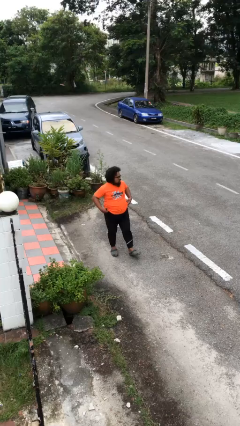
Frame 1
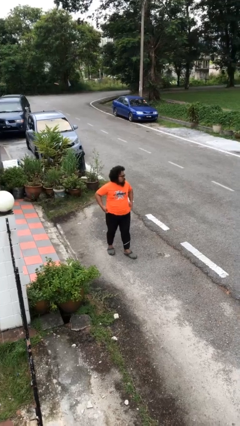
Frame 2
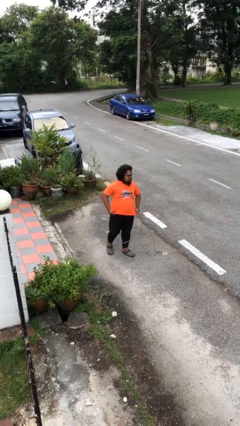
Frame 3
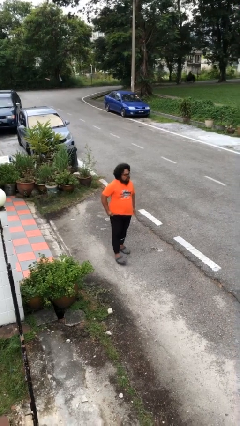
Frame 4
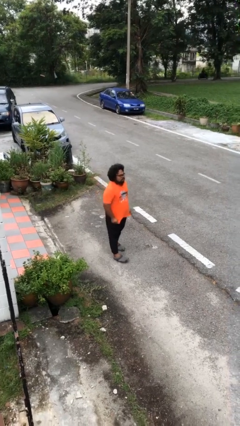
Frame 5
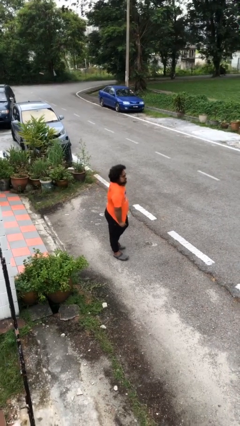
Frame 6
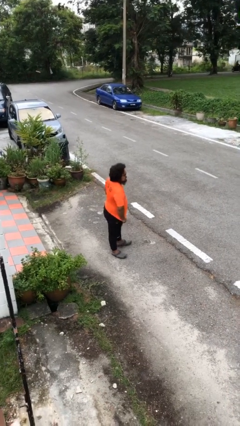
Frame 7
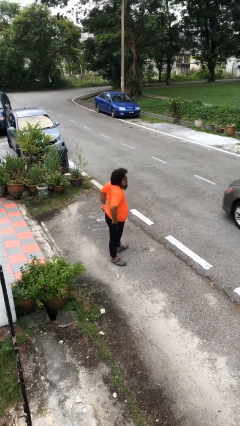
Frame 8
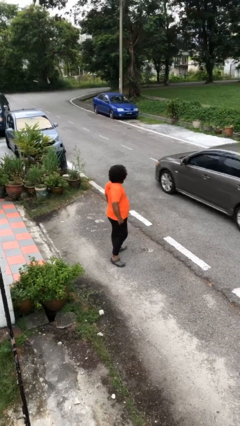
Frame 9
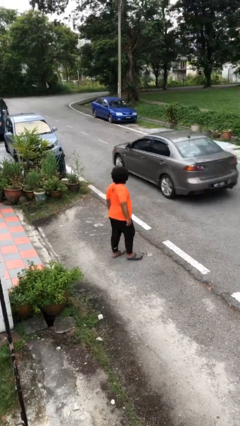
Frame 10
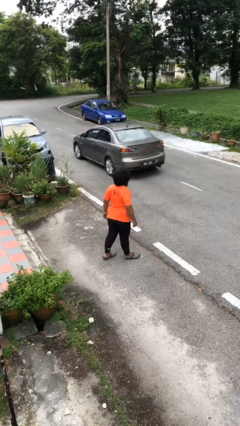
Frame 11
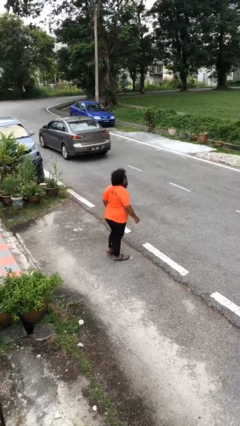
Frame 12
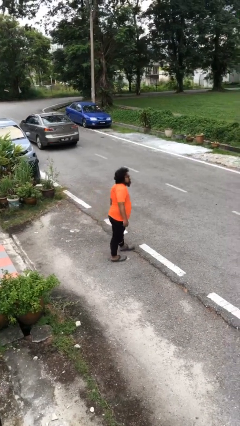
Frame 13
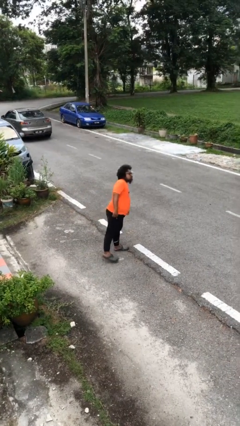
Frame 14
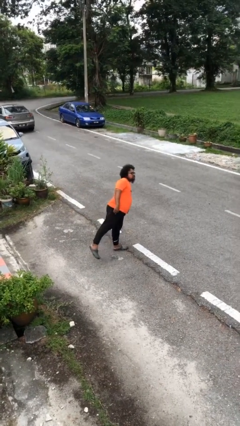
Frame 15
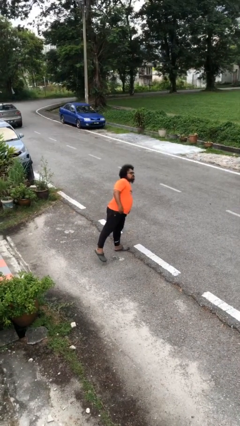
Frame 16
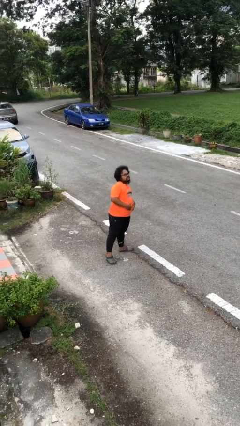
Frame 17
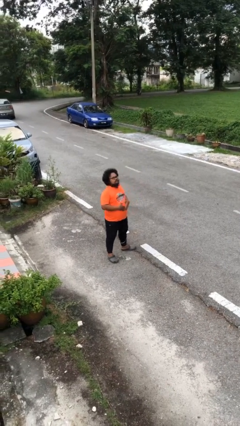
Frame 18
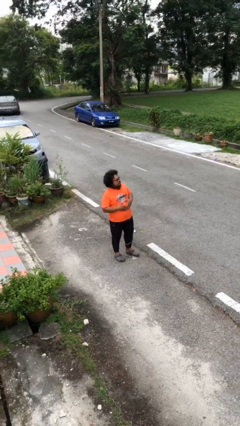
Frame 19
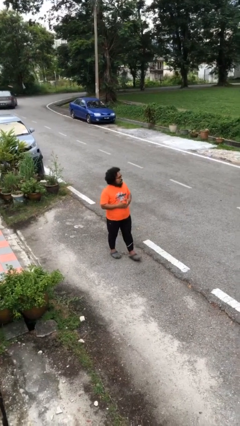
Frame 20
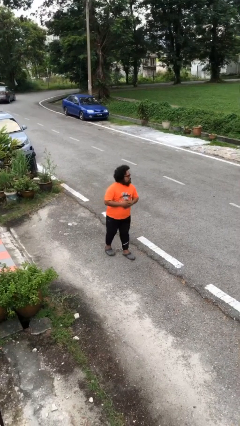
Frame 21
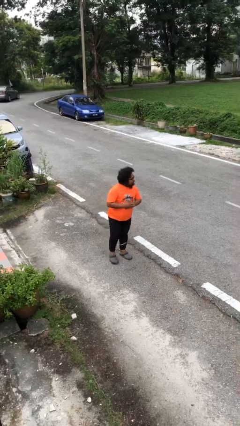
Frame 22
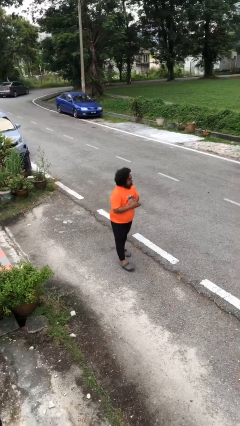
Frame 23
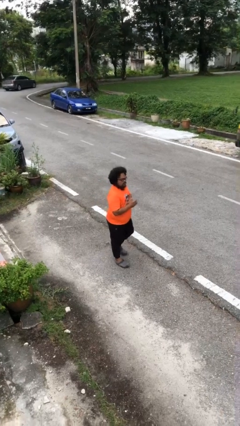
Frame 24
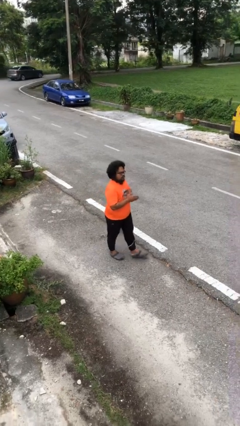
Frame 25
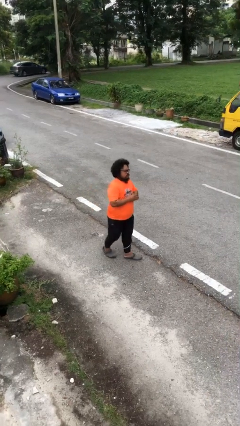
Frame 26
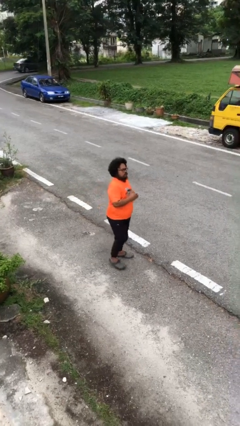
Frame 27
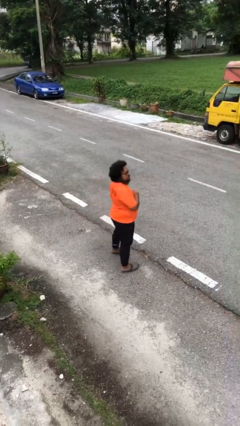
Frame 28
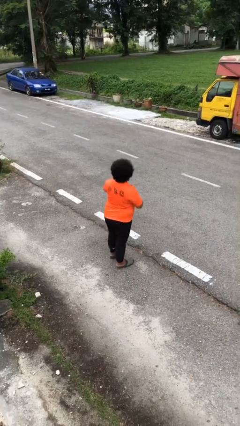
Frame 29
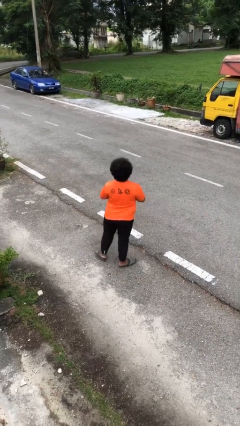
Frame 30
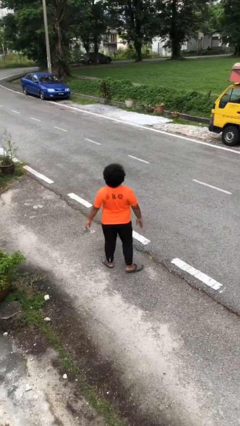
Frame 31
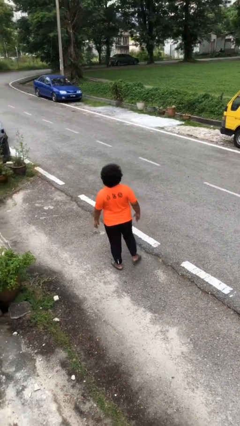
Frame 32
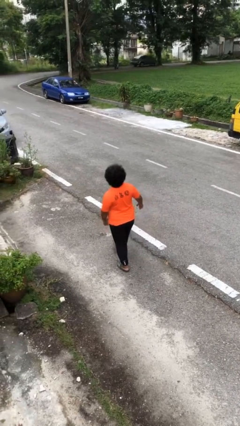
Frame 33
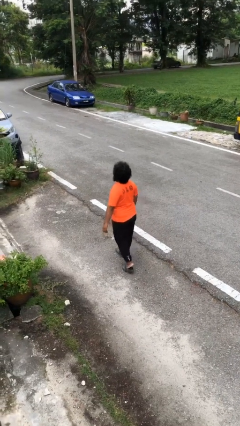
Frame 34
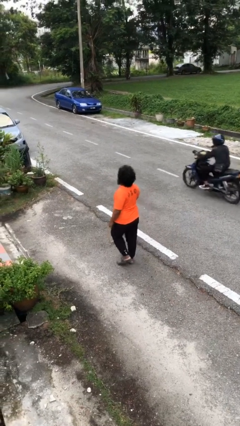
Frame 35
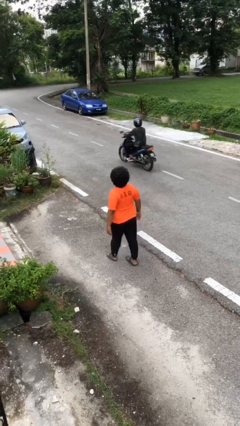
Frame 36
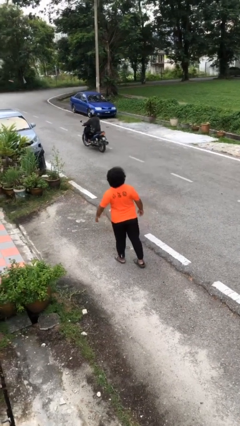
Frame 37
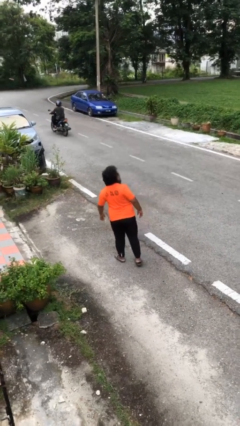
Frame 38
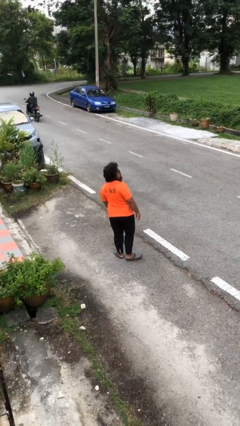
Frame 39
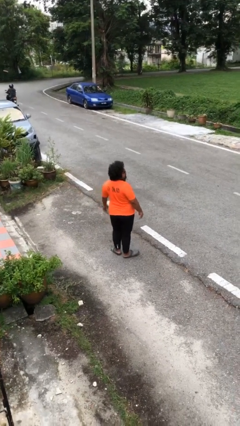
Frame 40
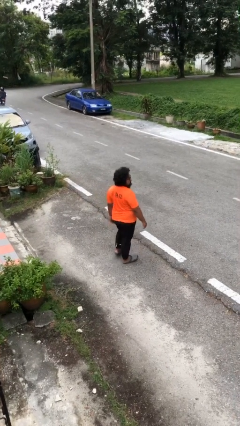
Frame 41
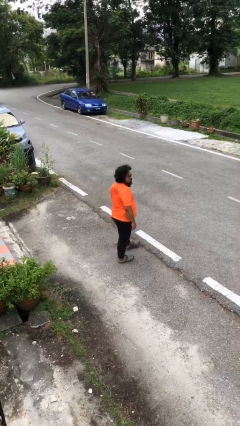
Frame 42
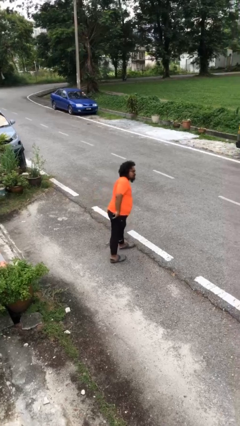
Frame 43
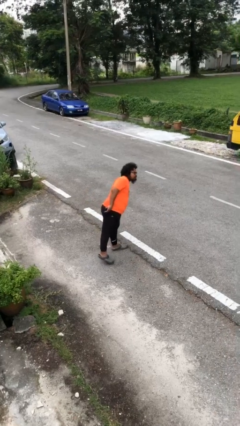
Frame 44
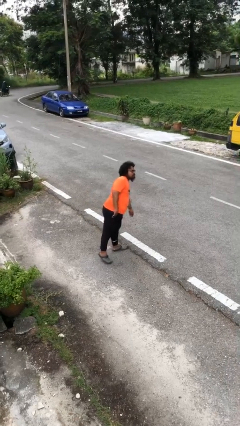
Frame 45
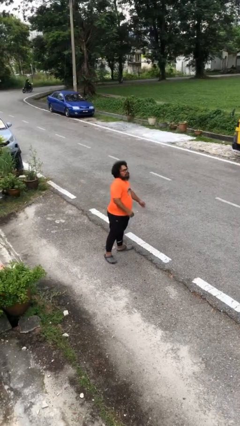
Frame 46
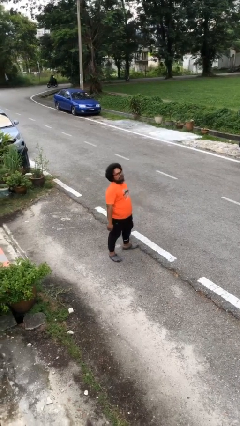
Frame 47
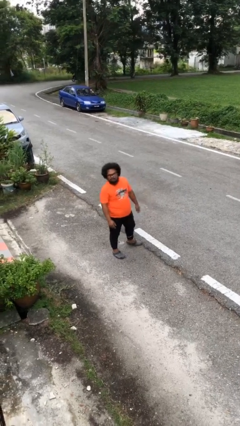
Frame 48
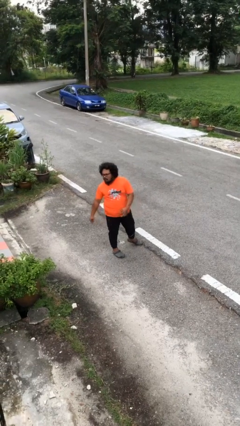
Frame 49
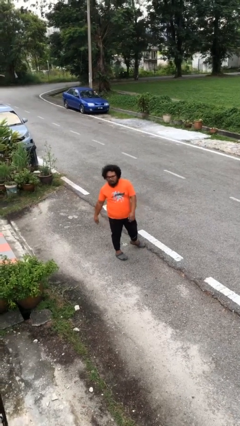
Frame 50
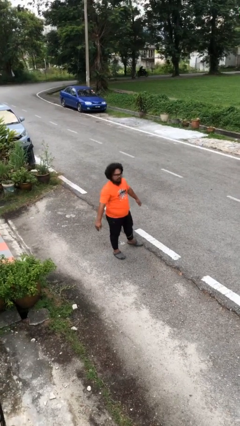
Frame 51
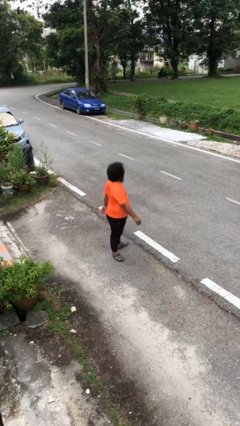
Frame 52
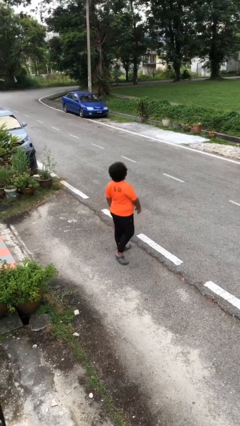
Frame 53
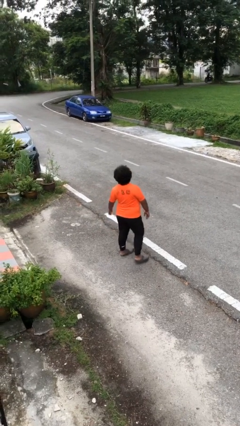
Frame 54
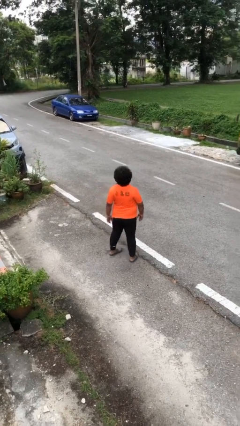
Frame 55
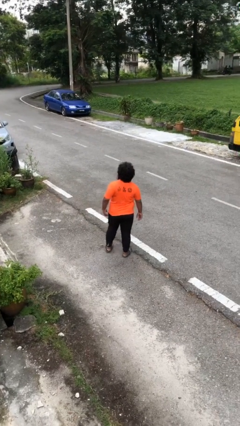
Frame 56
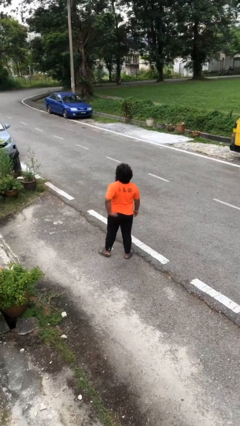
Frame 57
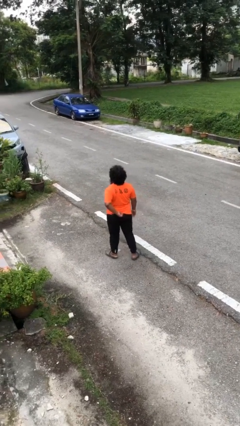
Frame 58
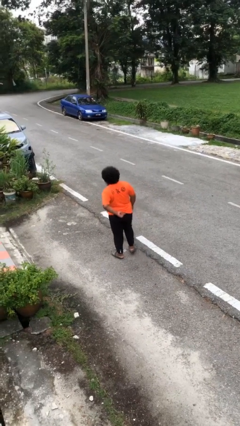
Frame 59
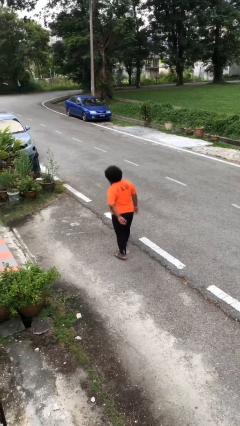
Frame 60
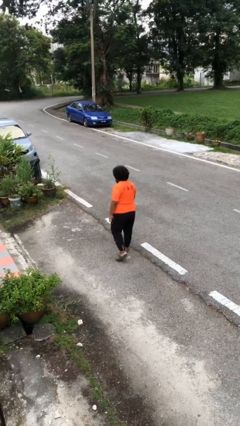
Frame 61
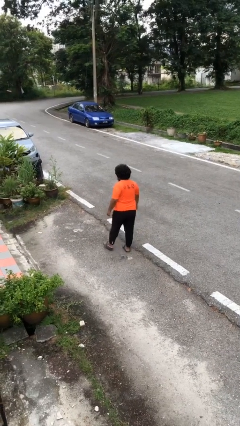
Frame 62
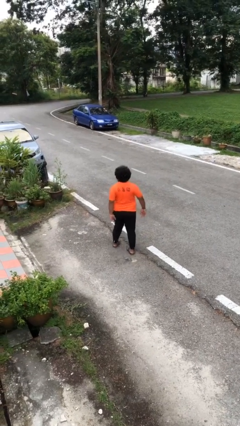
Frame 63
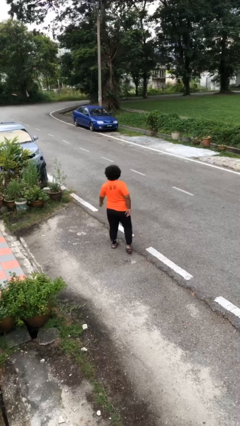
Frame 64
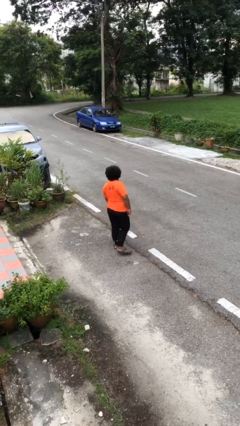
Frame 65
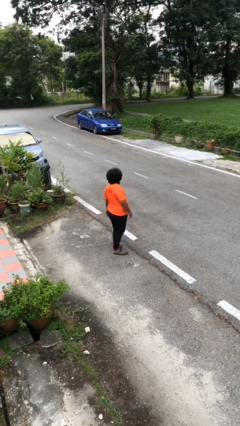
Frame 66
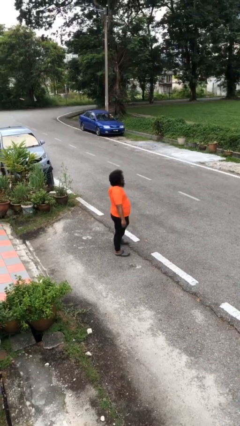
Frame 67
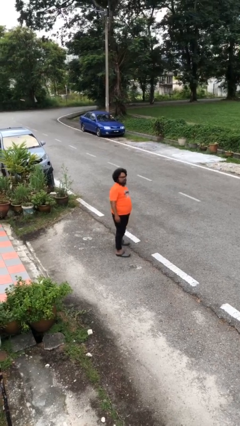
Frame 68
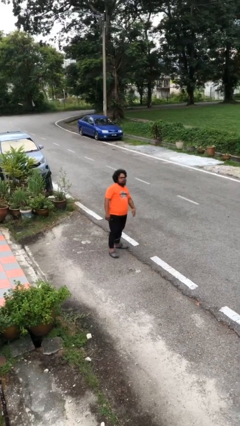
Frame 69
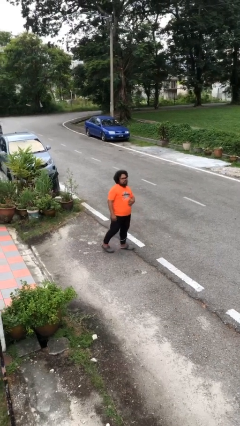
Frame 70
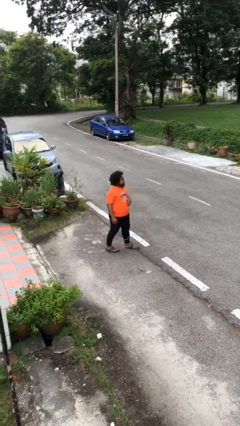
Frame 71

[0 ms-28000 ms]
person walks

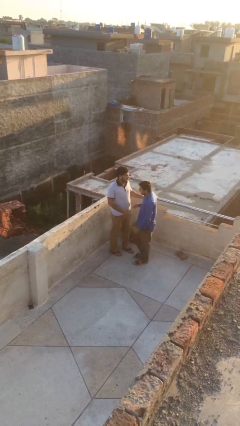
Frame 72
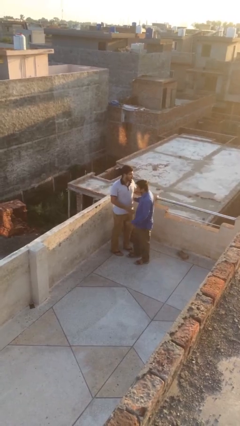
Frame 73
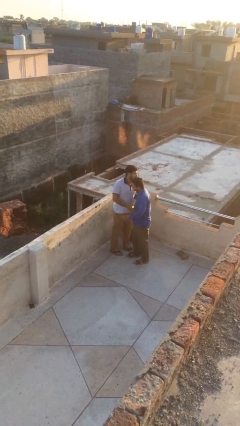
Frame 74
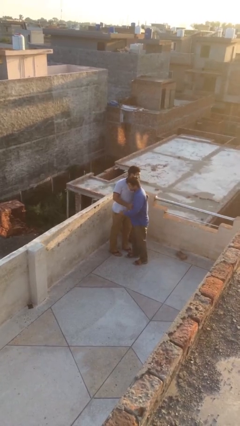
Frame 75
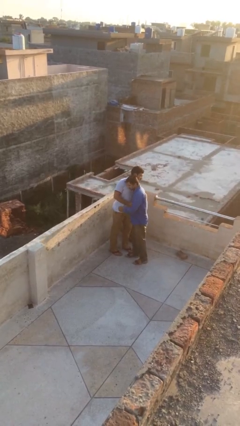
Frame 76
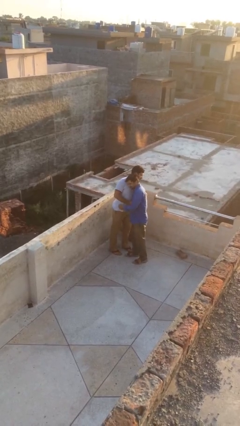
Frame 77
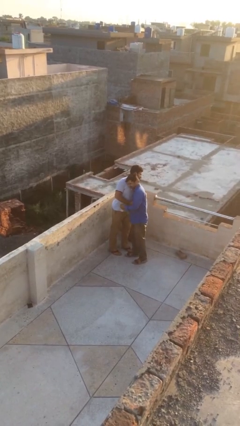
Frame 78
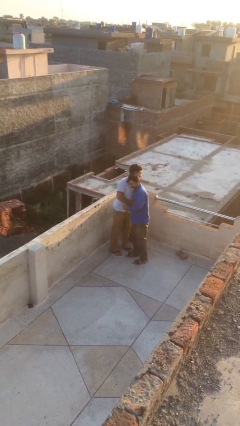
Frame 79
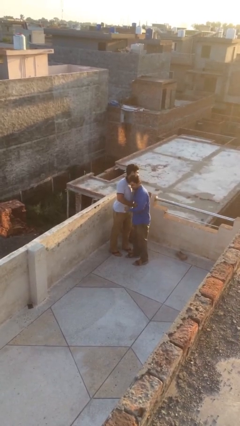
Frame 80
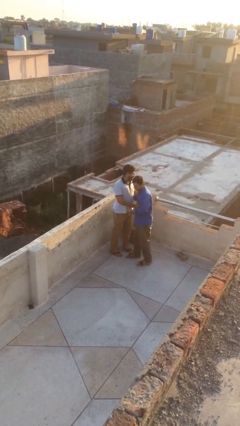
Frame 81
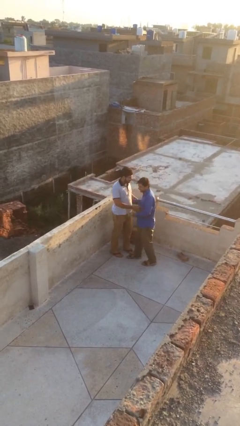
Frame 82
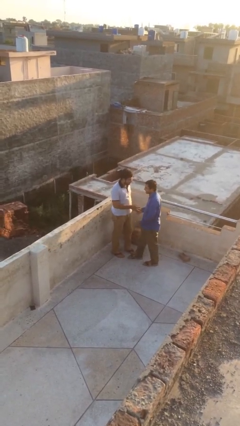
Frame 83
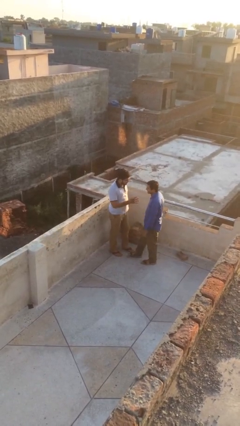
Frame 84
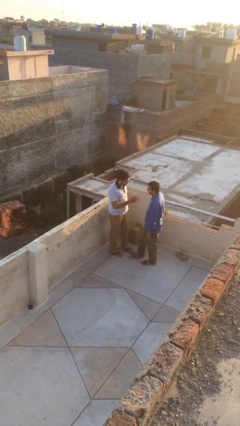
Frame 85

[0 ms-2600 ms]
person embraces person

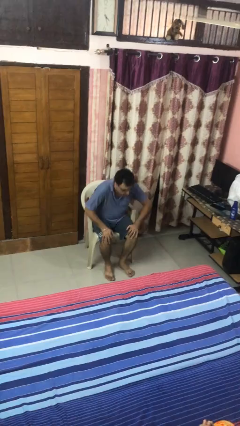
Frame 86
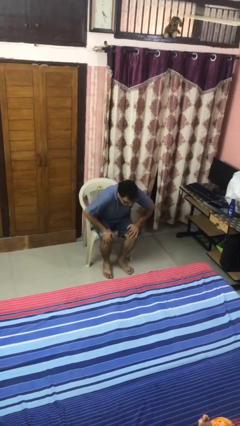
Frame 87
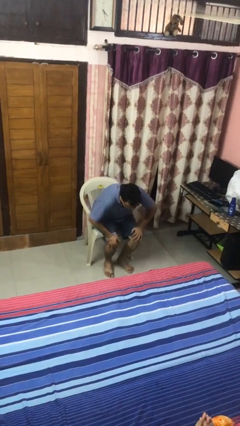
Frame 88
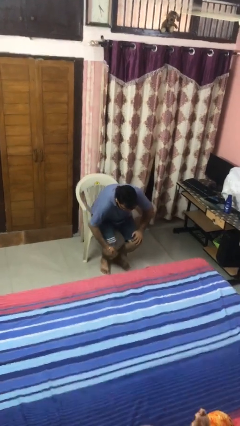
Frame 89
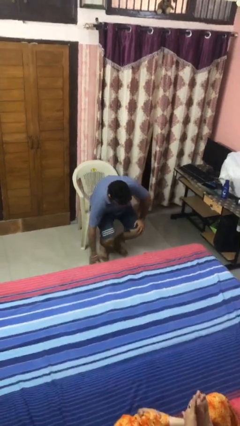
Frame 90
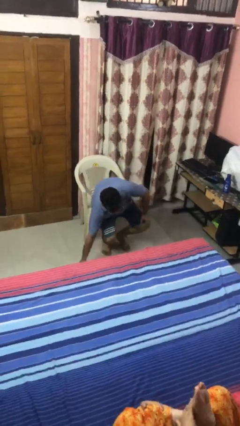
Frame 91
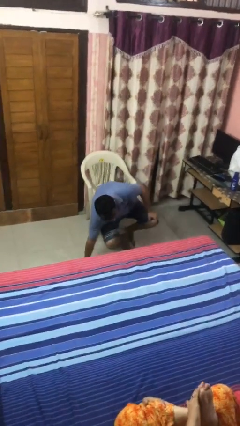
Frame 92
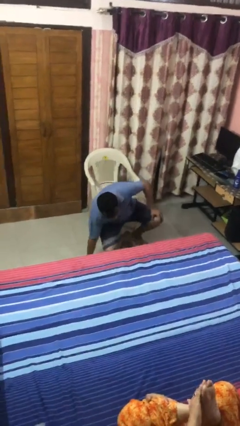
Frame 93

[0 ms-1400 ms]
person falls from chair
